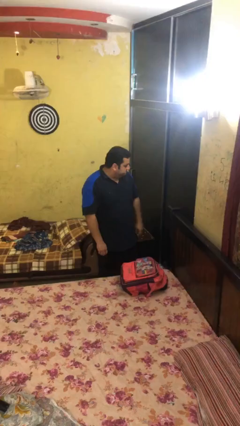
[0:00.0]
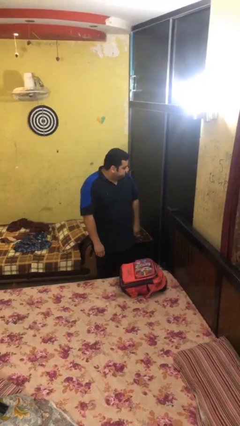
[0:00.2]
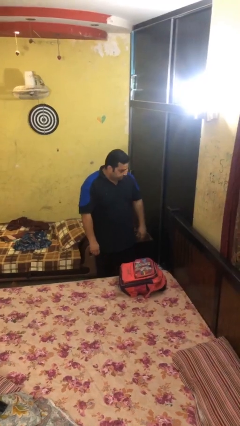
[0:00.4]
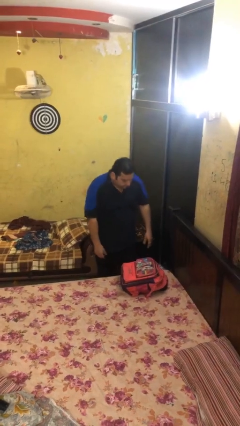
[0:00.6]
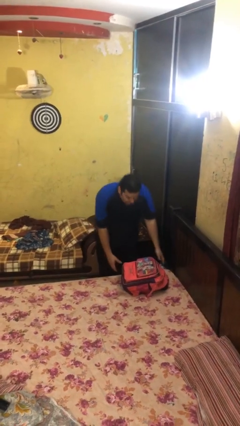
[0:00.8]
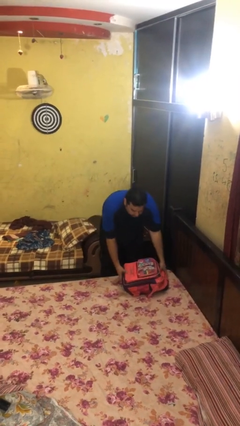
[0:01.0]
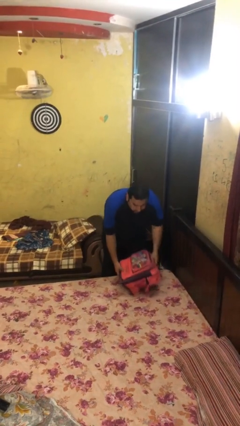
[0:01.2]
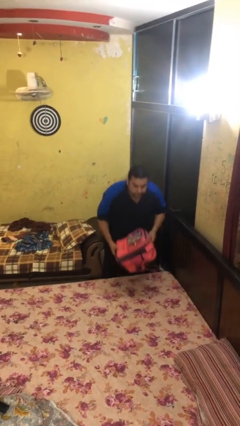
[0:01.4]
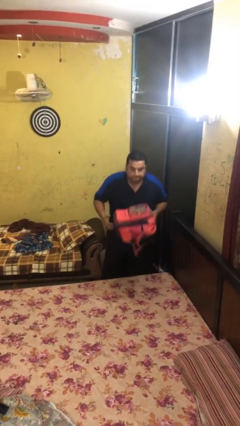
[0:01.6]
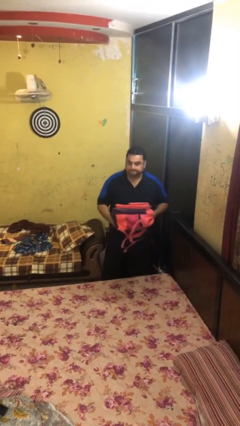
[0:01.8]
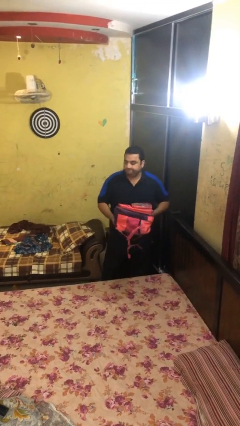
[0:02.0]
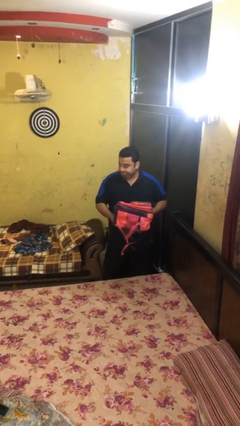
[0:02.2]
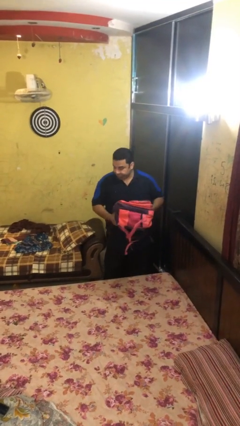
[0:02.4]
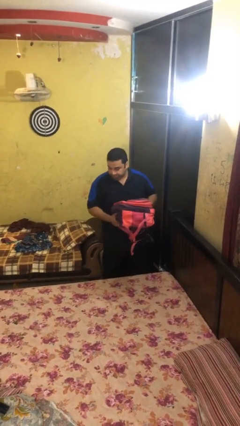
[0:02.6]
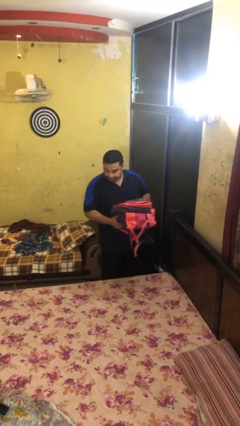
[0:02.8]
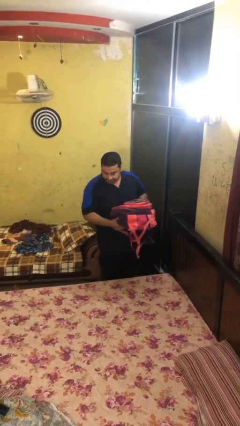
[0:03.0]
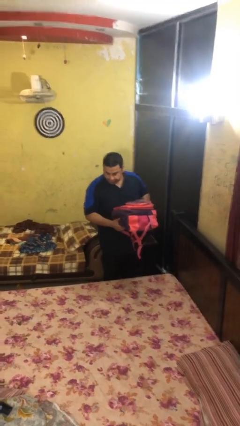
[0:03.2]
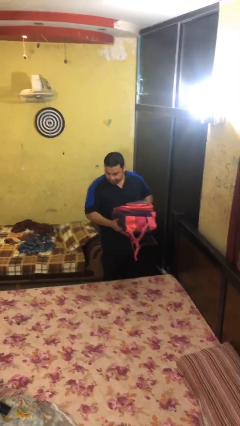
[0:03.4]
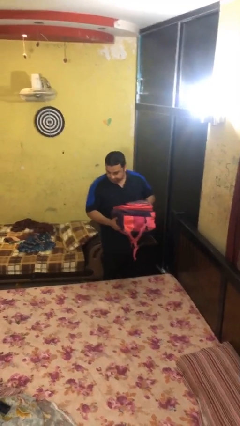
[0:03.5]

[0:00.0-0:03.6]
person picks up object from bed

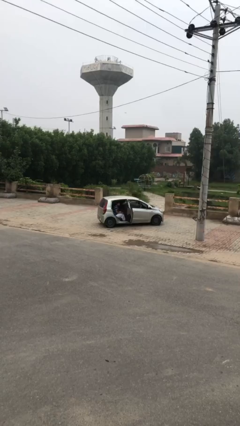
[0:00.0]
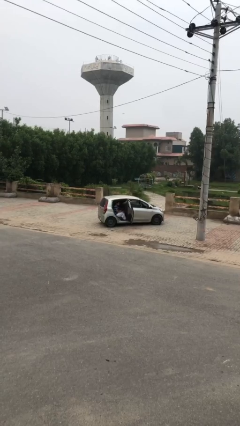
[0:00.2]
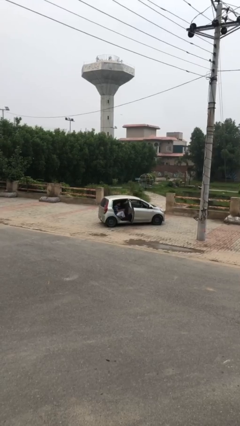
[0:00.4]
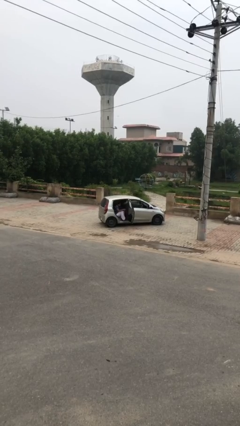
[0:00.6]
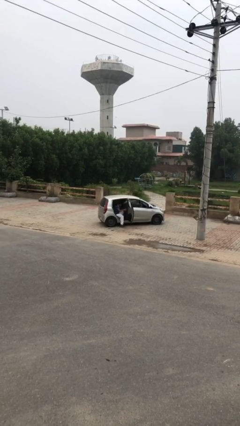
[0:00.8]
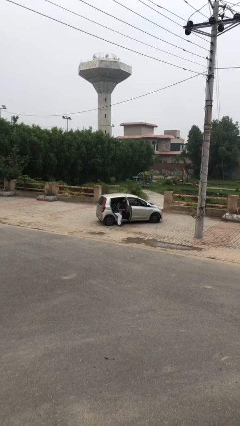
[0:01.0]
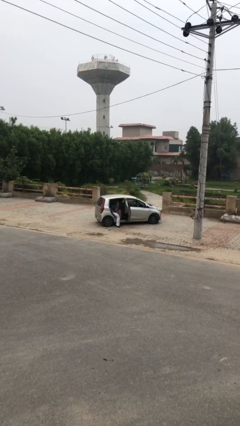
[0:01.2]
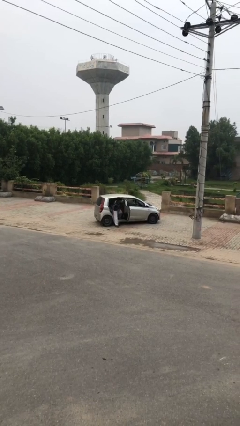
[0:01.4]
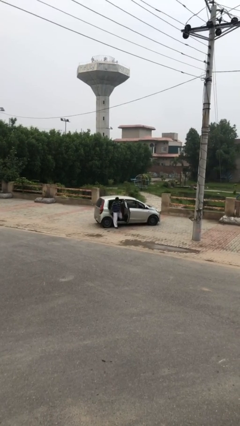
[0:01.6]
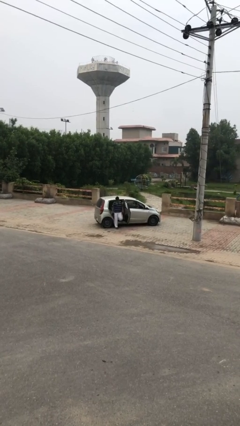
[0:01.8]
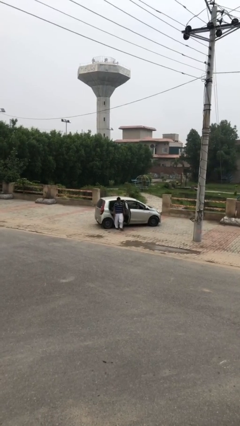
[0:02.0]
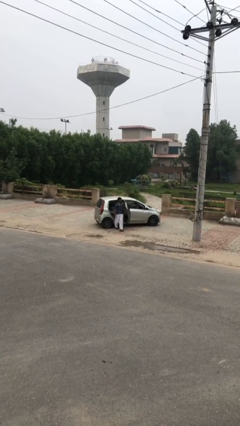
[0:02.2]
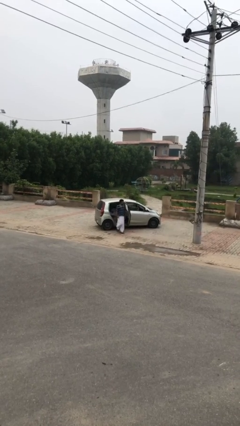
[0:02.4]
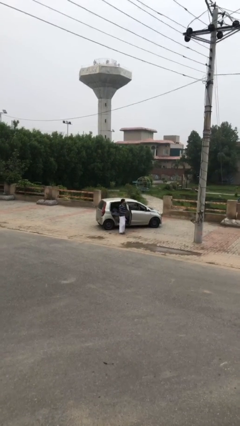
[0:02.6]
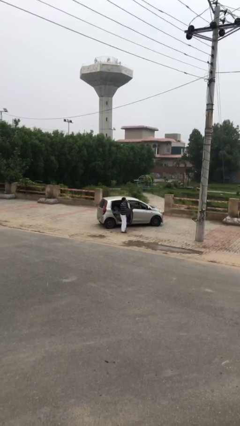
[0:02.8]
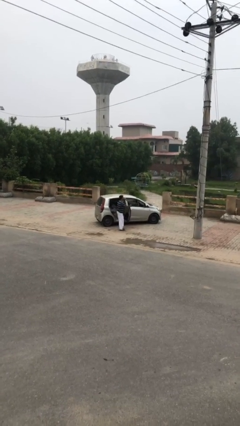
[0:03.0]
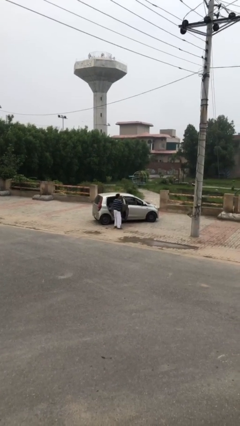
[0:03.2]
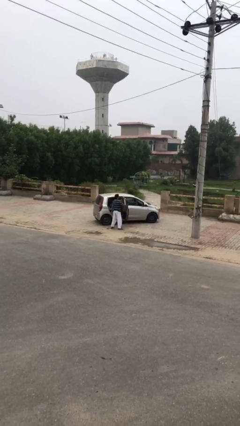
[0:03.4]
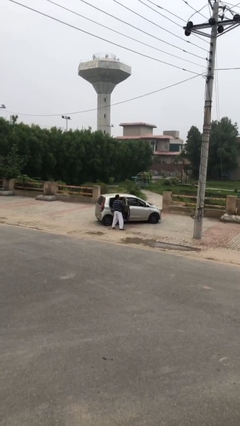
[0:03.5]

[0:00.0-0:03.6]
person exits car

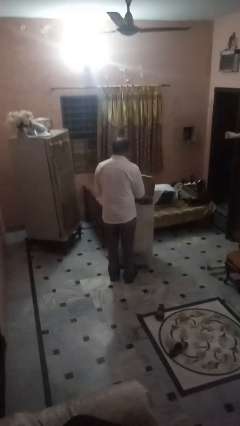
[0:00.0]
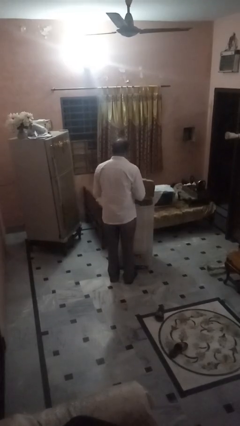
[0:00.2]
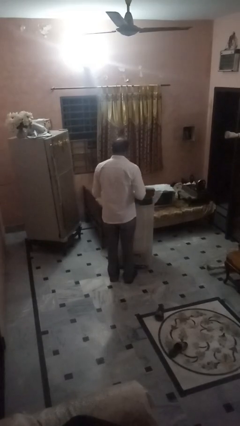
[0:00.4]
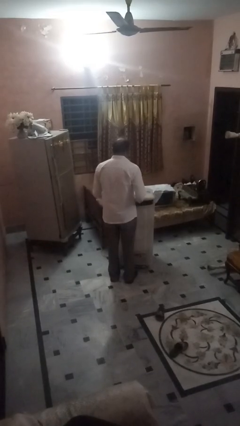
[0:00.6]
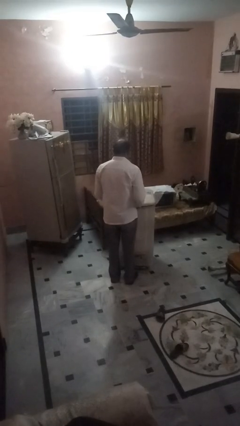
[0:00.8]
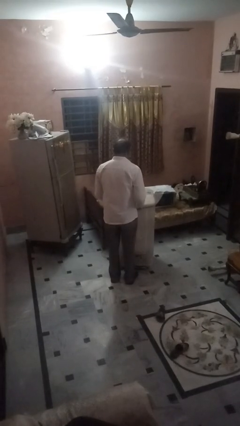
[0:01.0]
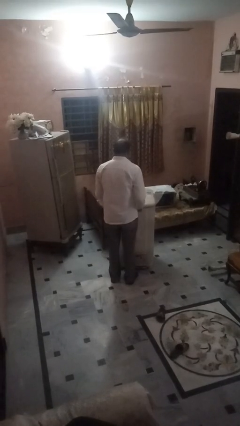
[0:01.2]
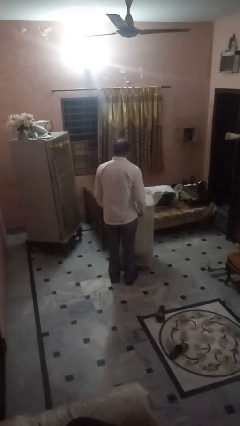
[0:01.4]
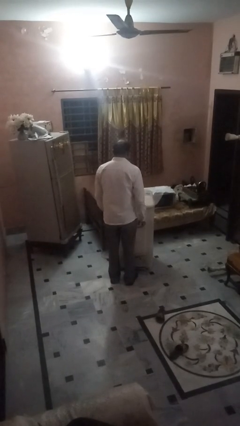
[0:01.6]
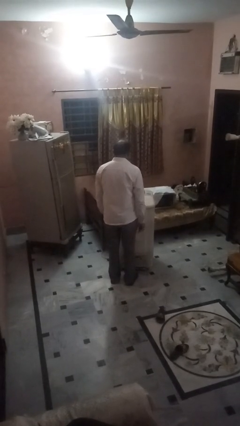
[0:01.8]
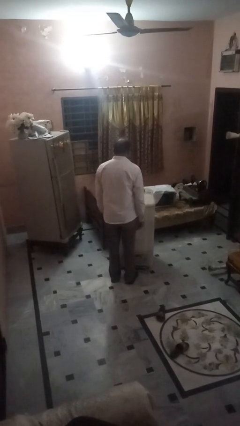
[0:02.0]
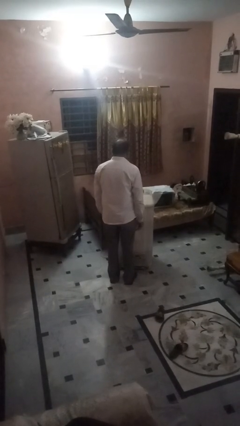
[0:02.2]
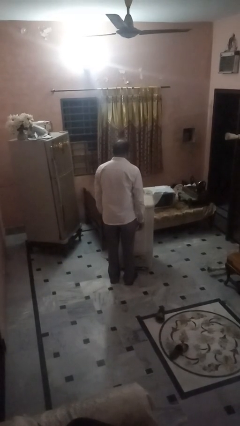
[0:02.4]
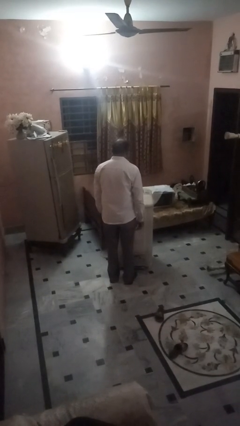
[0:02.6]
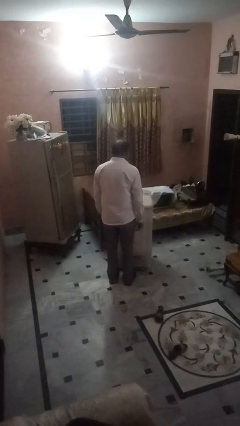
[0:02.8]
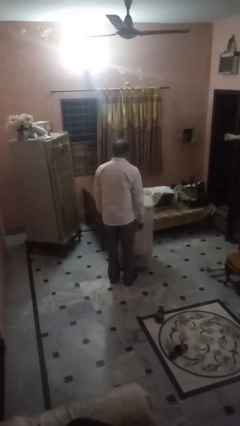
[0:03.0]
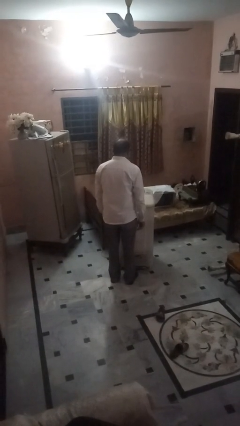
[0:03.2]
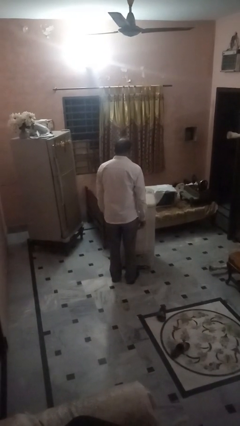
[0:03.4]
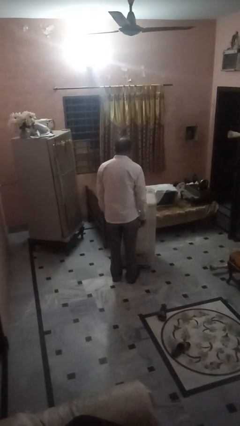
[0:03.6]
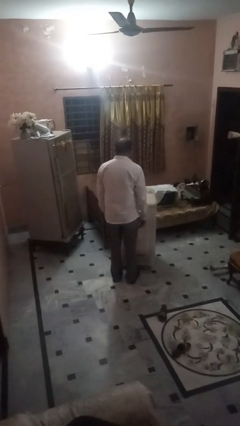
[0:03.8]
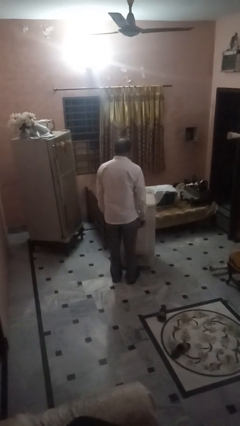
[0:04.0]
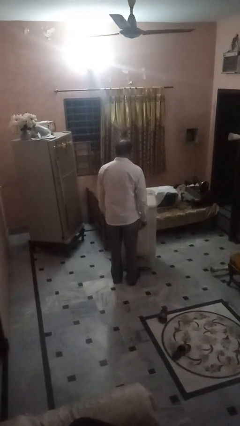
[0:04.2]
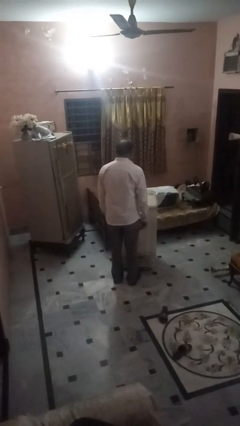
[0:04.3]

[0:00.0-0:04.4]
person closes clothes washer

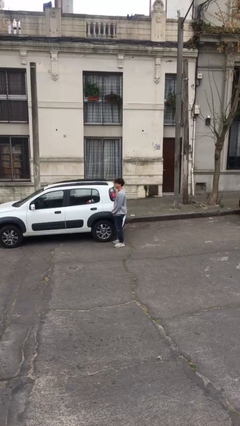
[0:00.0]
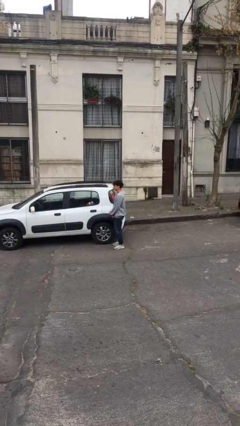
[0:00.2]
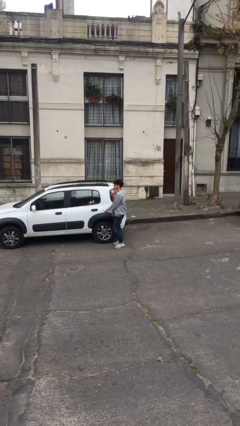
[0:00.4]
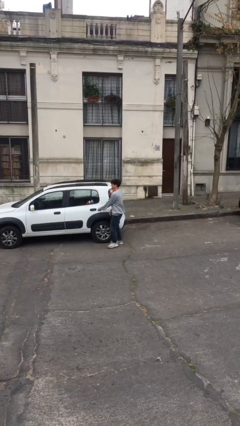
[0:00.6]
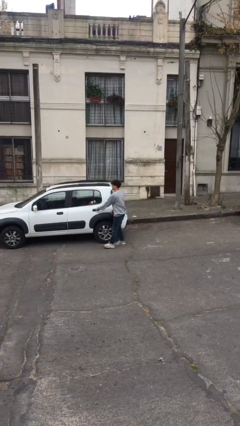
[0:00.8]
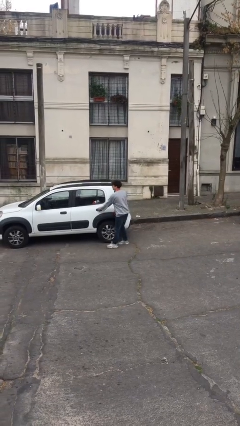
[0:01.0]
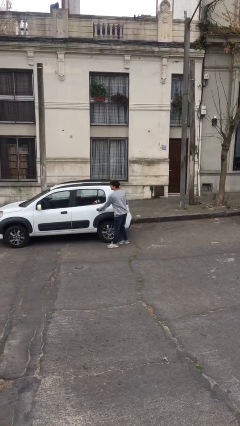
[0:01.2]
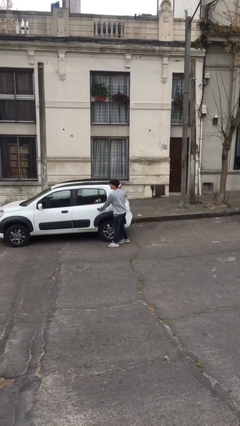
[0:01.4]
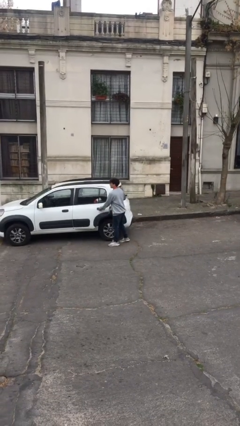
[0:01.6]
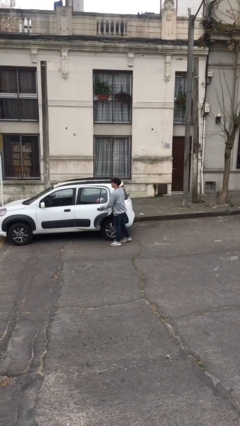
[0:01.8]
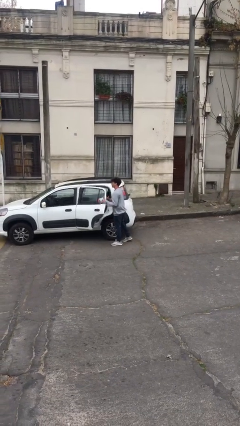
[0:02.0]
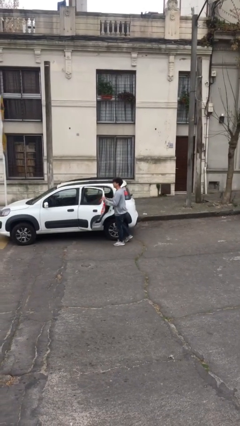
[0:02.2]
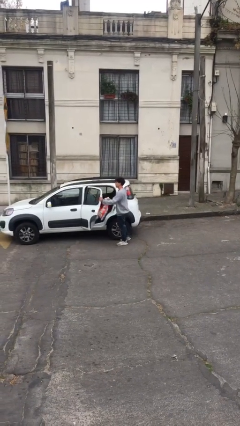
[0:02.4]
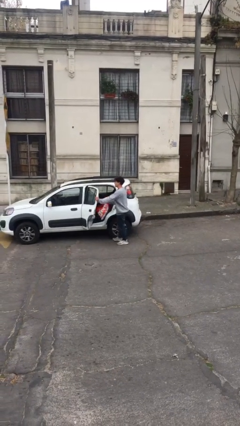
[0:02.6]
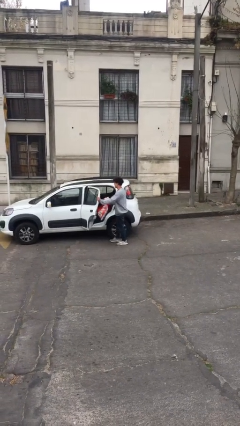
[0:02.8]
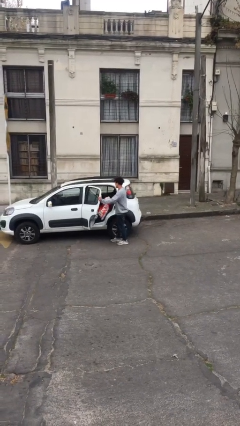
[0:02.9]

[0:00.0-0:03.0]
person opens car door

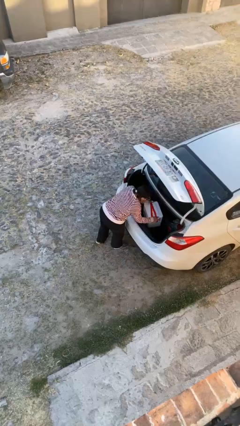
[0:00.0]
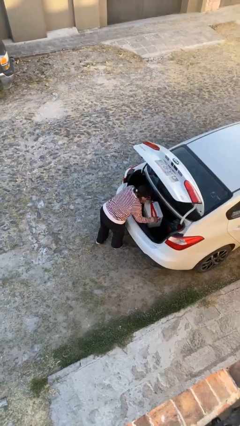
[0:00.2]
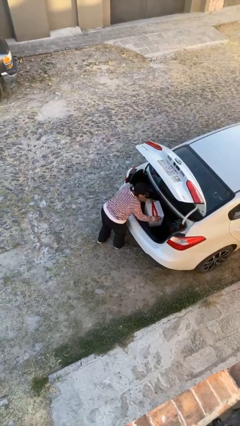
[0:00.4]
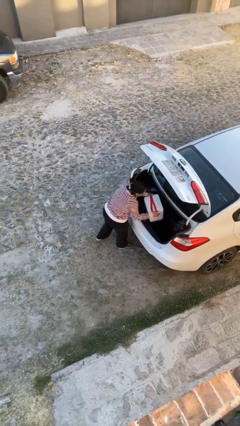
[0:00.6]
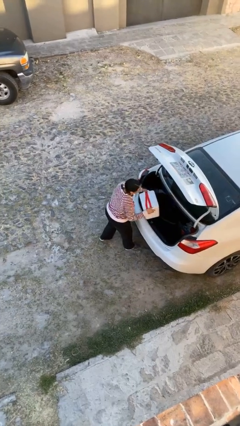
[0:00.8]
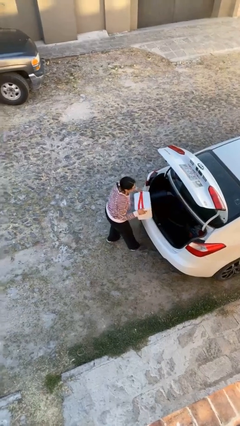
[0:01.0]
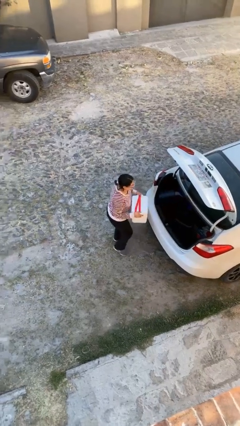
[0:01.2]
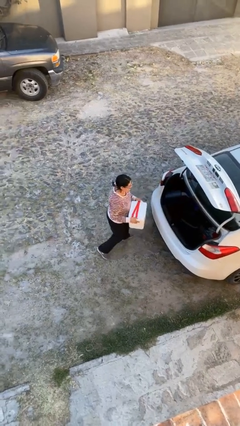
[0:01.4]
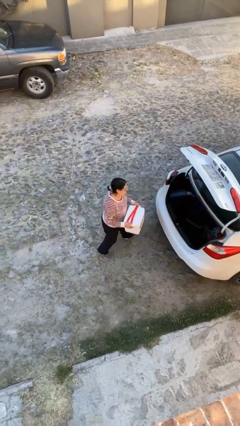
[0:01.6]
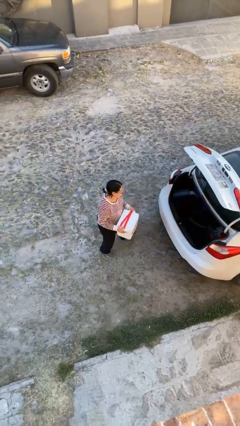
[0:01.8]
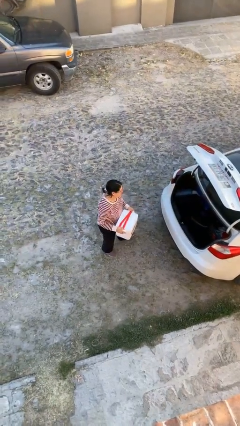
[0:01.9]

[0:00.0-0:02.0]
person unloads car

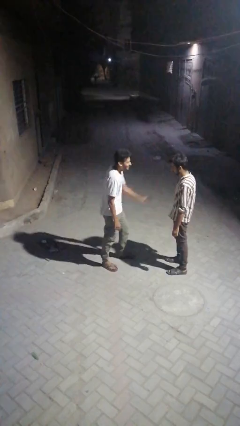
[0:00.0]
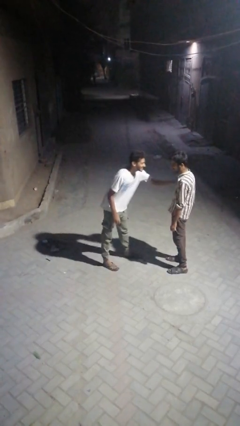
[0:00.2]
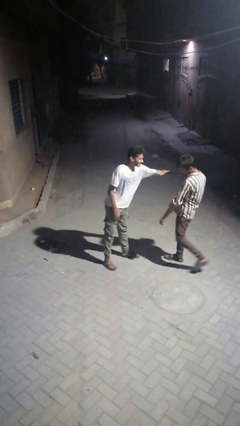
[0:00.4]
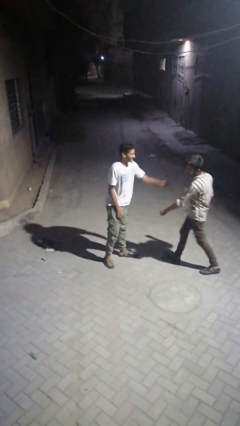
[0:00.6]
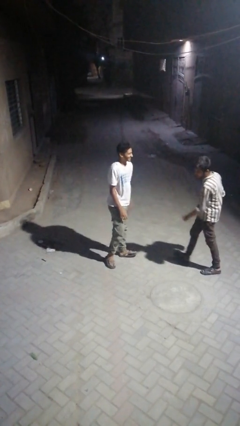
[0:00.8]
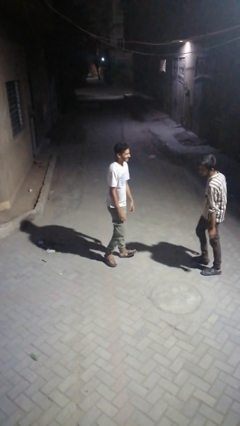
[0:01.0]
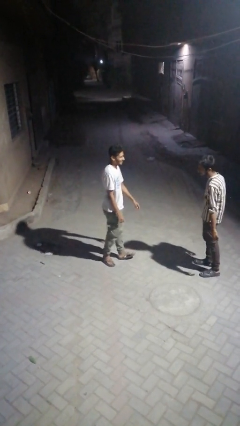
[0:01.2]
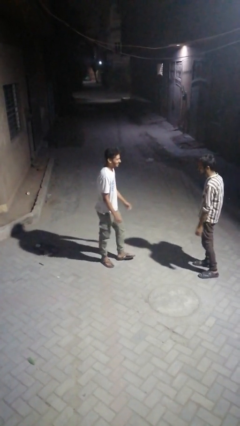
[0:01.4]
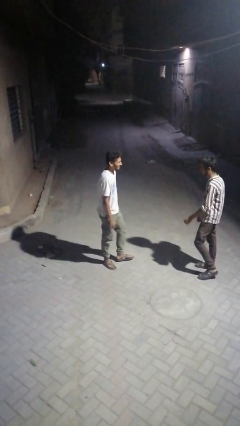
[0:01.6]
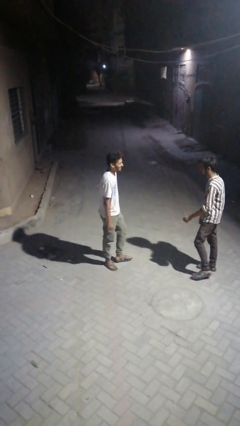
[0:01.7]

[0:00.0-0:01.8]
person shoves person
